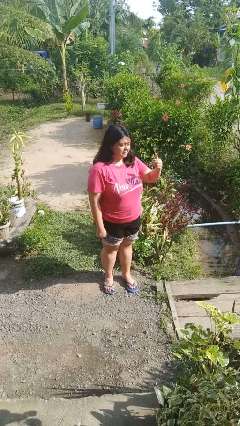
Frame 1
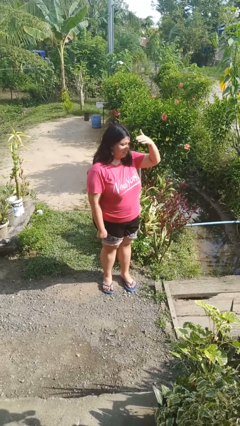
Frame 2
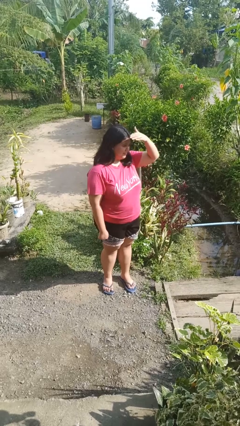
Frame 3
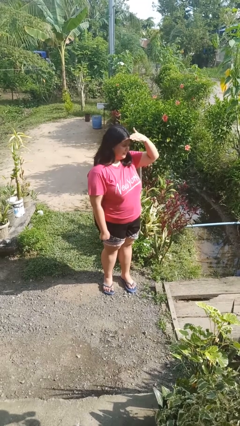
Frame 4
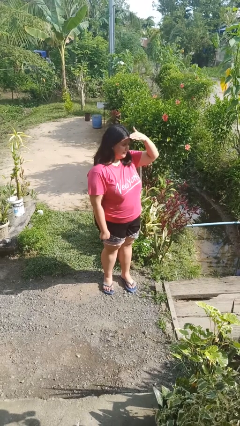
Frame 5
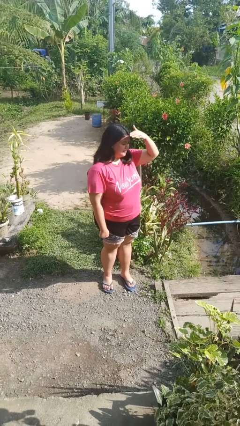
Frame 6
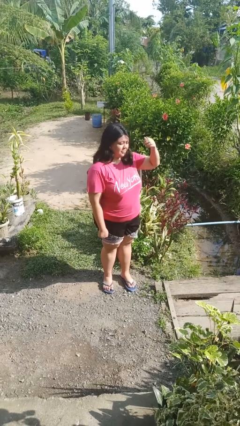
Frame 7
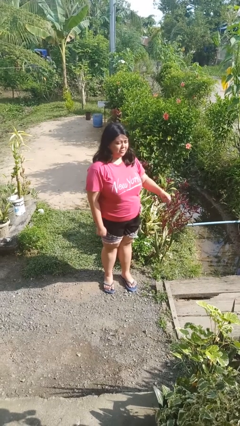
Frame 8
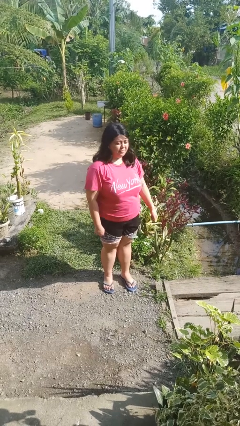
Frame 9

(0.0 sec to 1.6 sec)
person shades eyes

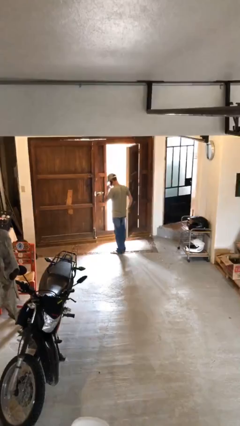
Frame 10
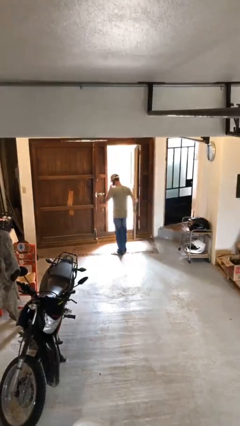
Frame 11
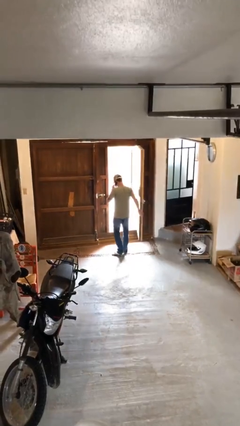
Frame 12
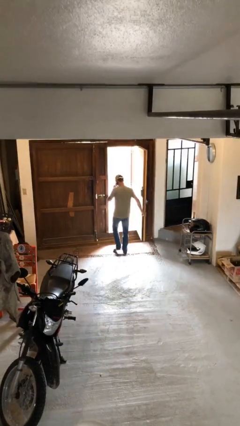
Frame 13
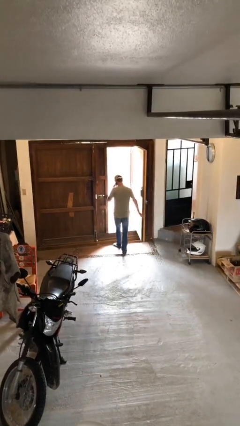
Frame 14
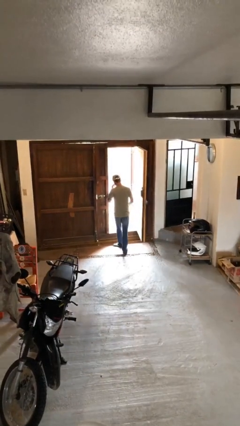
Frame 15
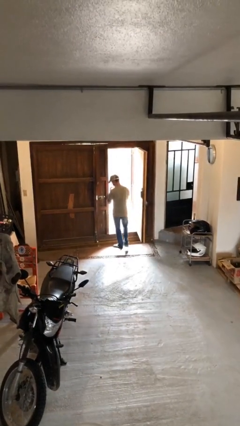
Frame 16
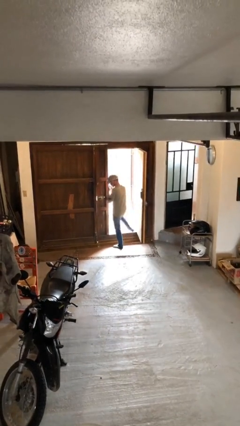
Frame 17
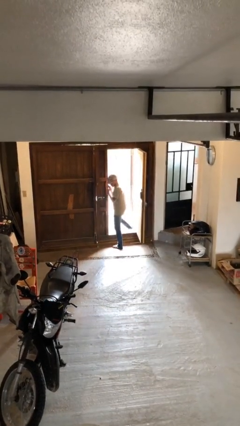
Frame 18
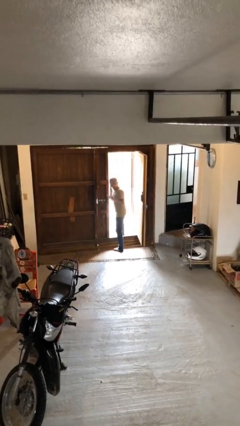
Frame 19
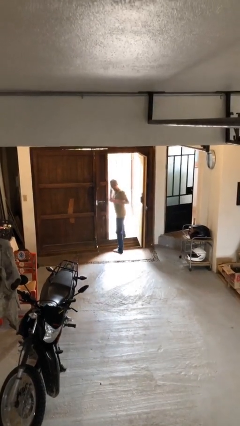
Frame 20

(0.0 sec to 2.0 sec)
person exits scene through structure

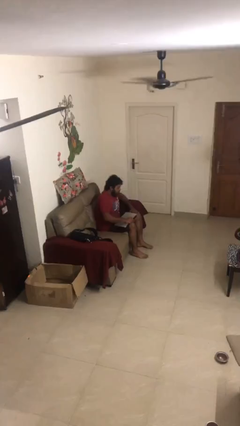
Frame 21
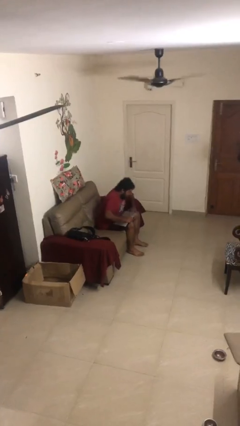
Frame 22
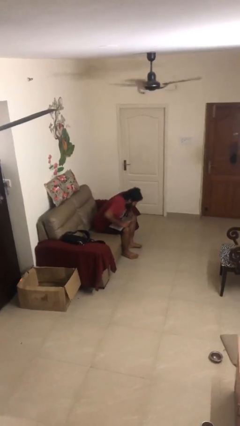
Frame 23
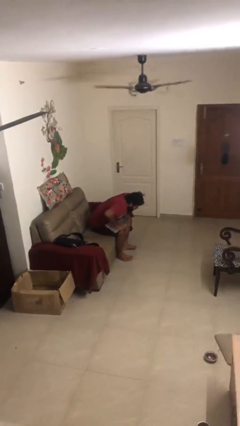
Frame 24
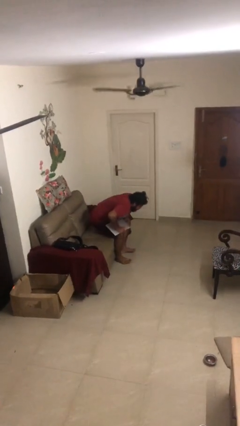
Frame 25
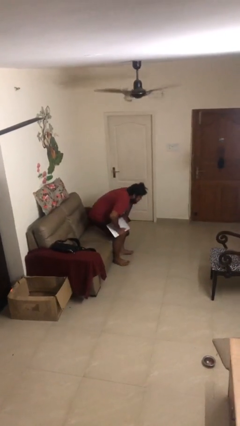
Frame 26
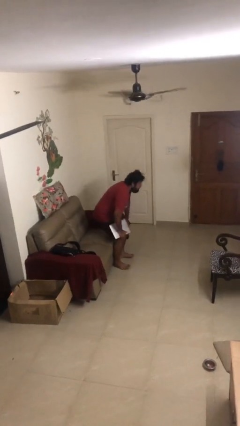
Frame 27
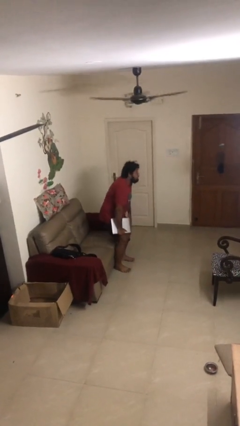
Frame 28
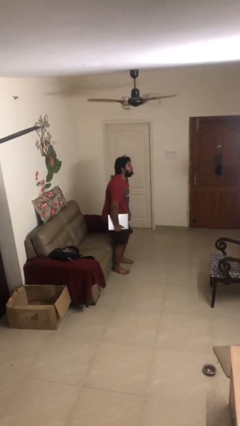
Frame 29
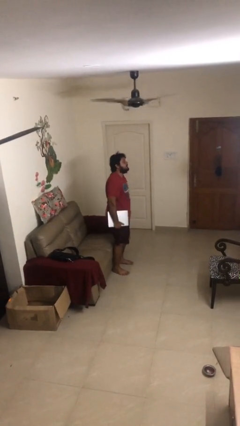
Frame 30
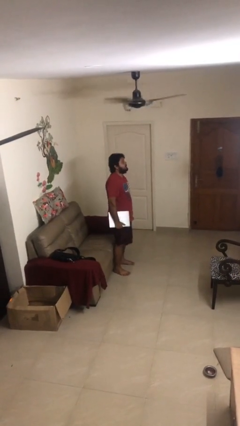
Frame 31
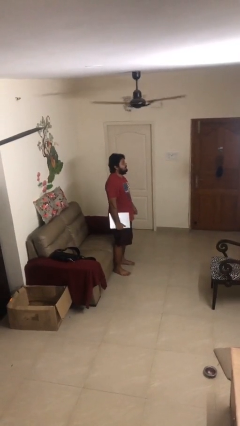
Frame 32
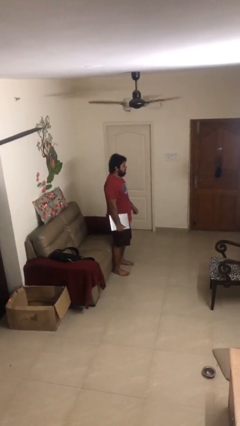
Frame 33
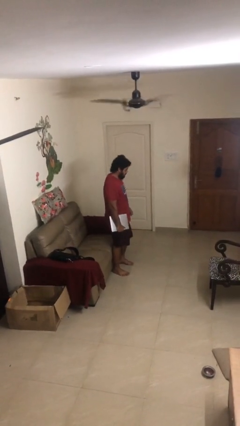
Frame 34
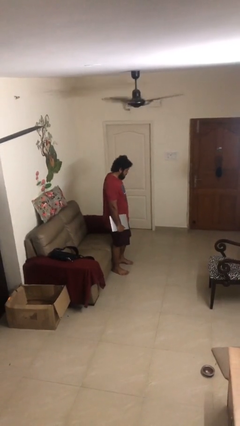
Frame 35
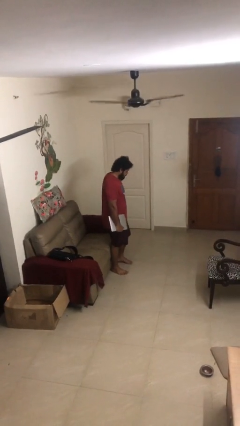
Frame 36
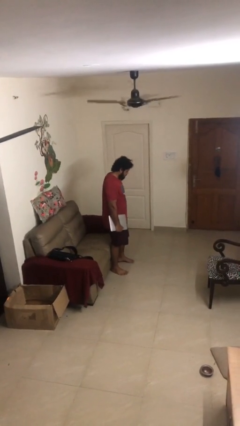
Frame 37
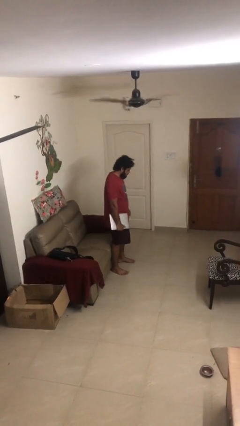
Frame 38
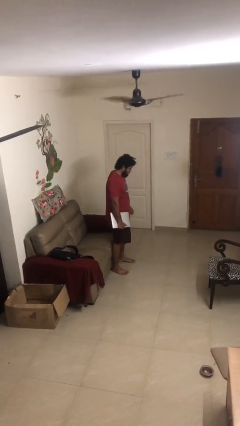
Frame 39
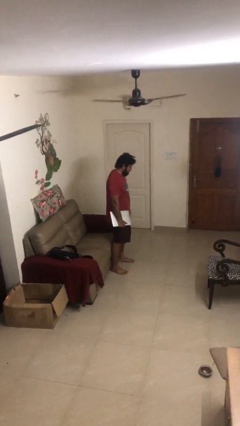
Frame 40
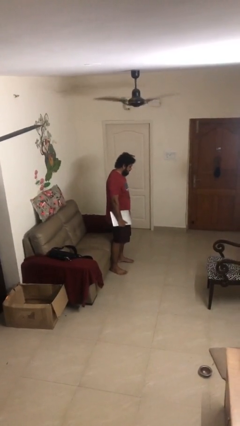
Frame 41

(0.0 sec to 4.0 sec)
person stands up

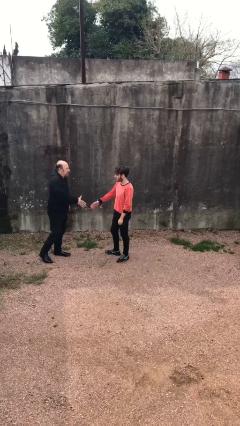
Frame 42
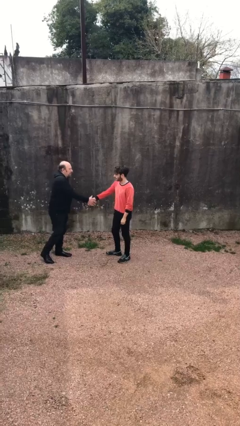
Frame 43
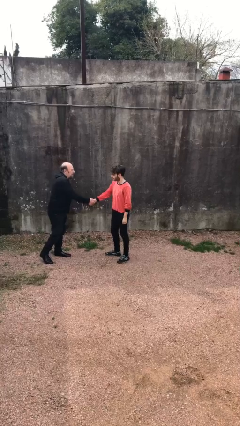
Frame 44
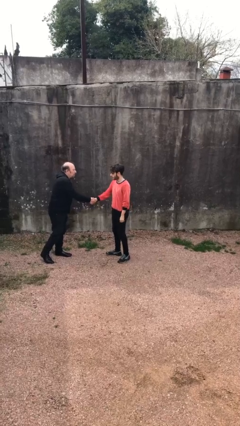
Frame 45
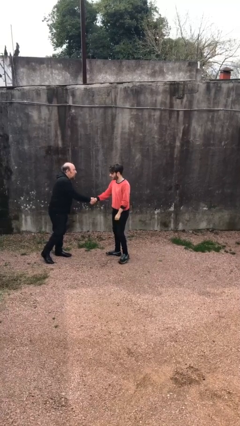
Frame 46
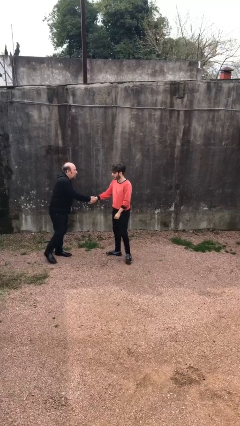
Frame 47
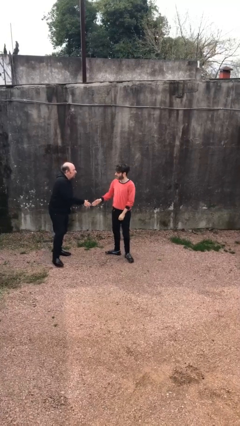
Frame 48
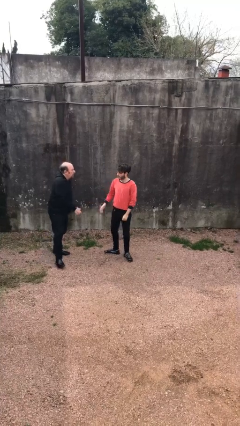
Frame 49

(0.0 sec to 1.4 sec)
person shakes hand

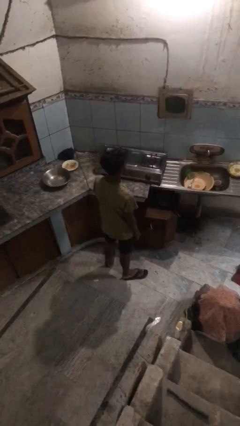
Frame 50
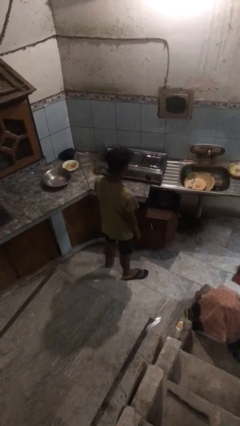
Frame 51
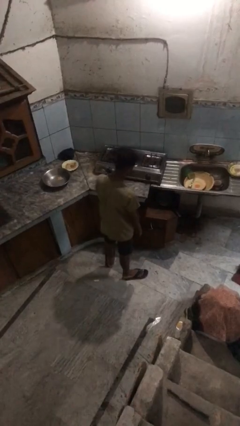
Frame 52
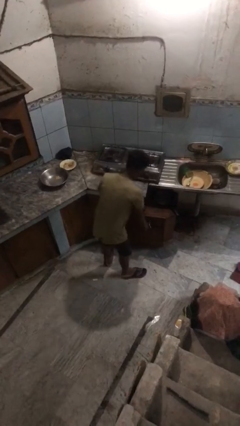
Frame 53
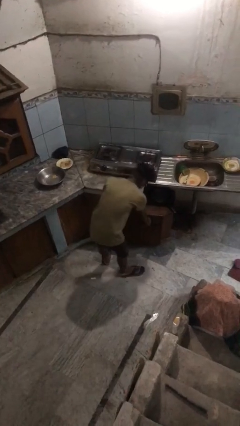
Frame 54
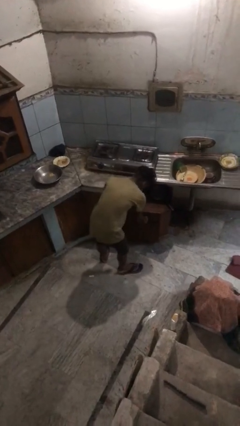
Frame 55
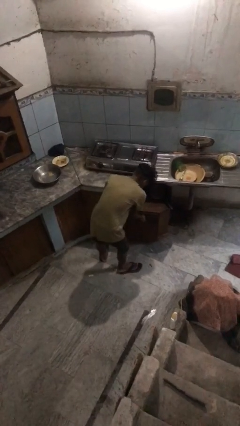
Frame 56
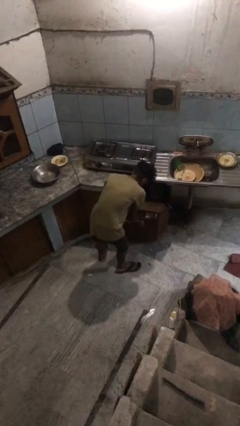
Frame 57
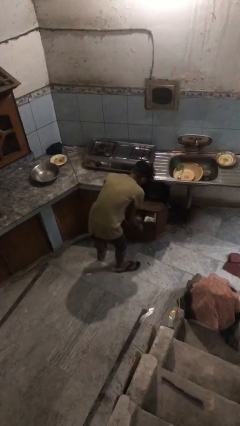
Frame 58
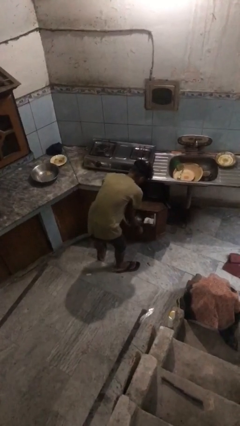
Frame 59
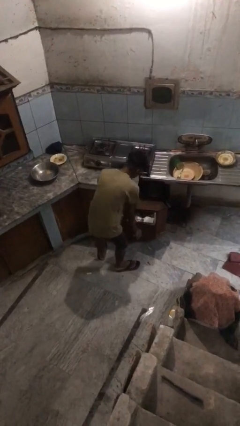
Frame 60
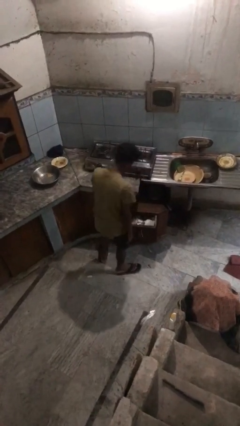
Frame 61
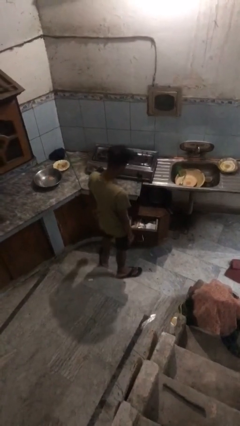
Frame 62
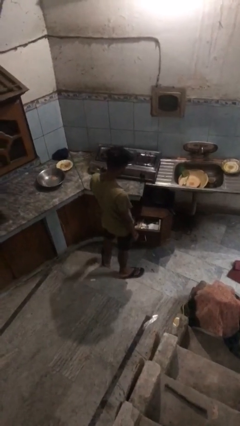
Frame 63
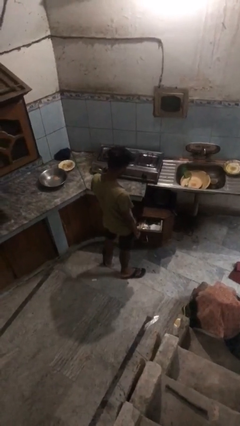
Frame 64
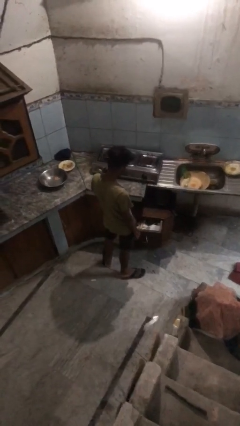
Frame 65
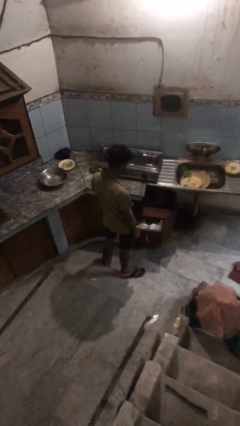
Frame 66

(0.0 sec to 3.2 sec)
person opens kitchen drawer

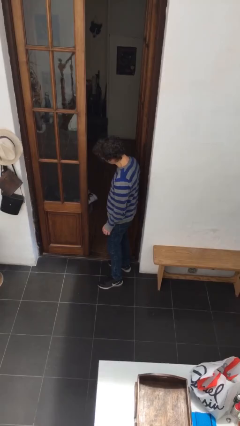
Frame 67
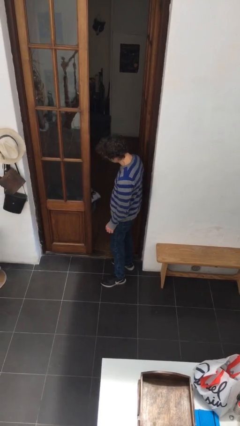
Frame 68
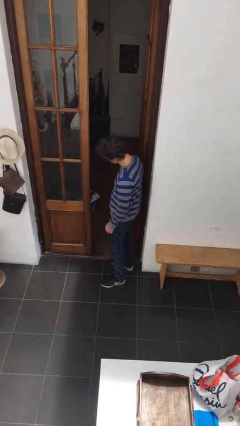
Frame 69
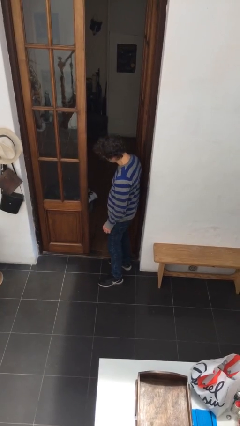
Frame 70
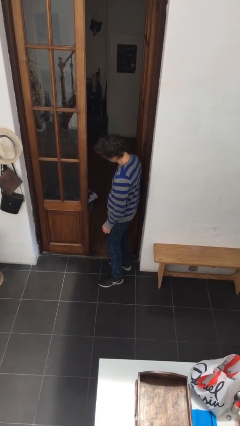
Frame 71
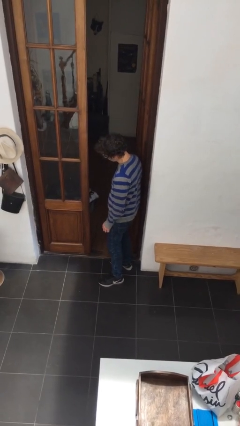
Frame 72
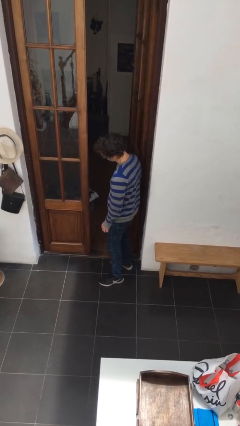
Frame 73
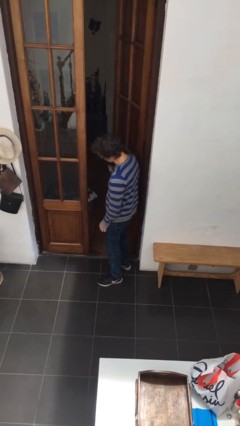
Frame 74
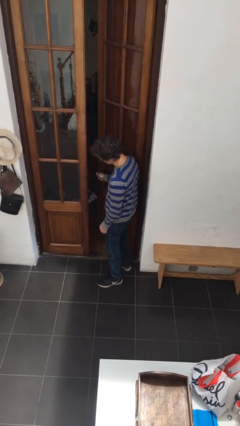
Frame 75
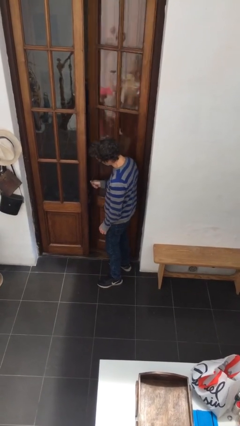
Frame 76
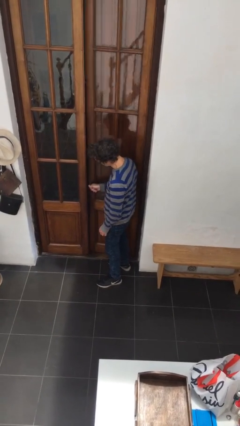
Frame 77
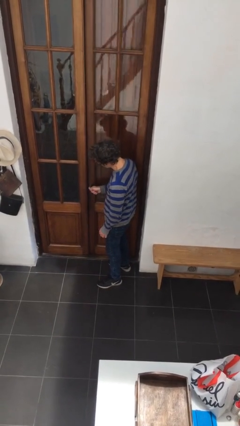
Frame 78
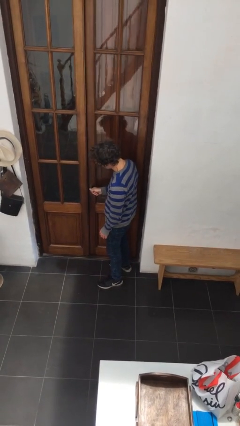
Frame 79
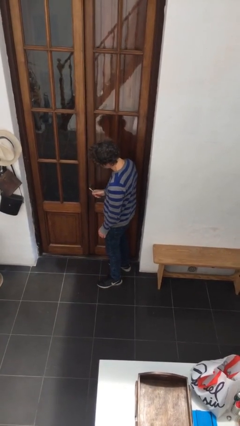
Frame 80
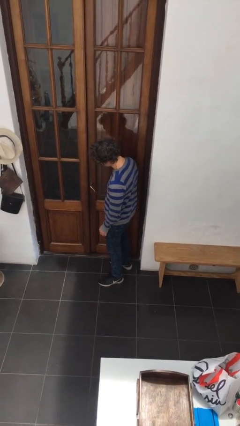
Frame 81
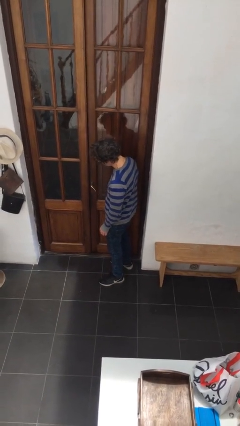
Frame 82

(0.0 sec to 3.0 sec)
person closes facility door

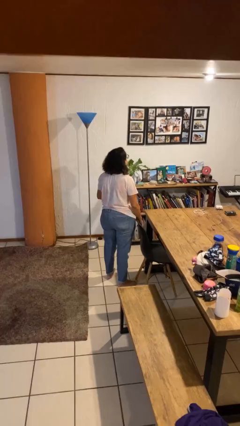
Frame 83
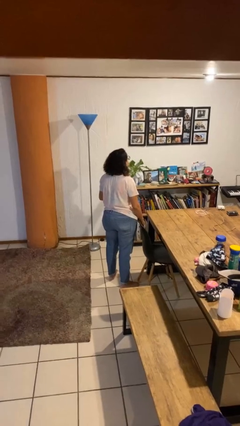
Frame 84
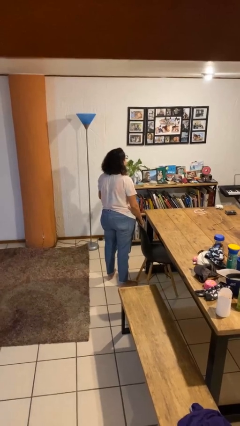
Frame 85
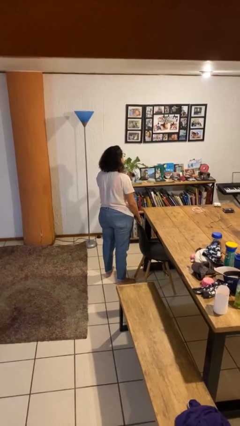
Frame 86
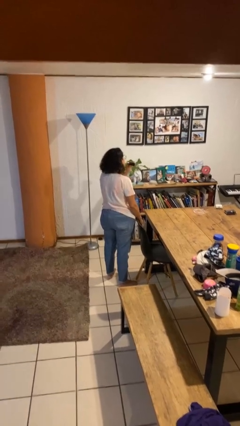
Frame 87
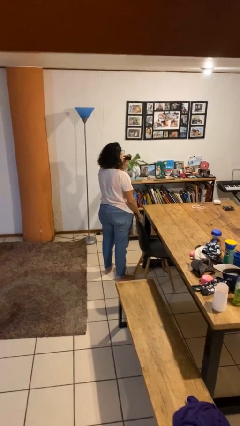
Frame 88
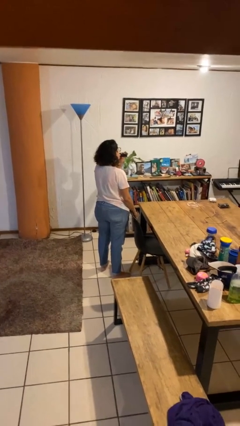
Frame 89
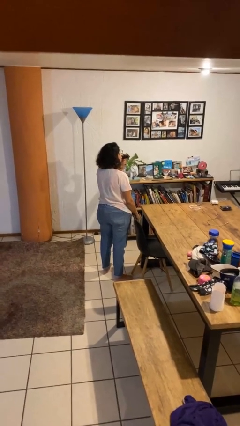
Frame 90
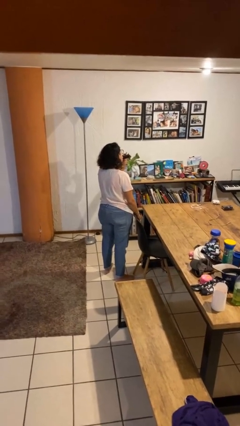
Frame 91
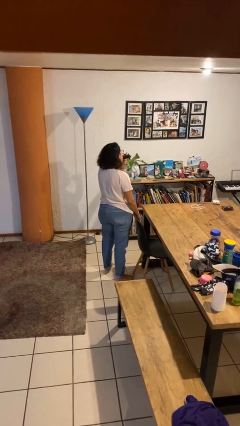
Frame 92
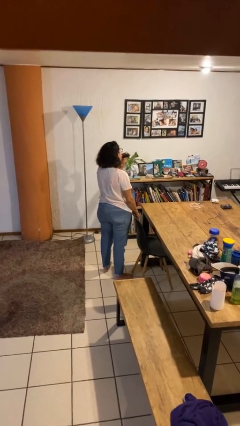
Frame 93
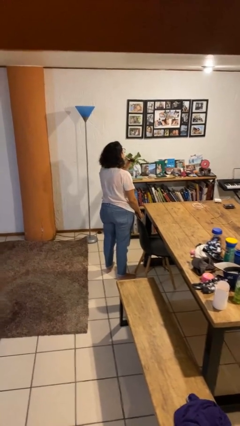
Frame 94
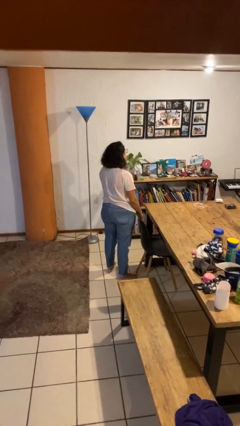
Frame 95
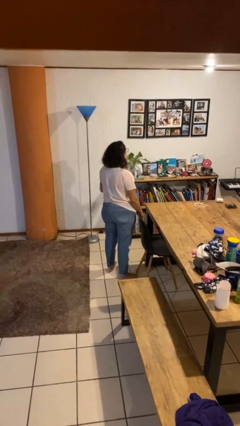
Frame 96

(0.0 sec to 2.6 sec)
person vapes
